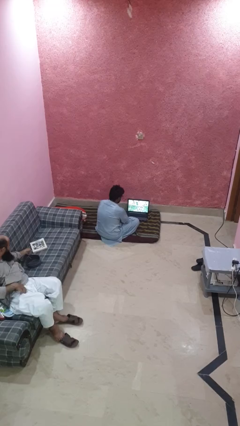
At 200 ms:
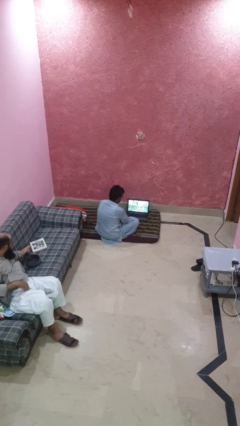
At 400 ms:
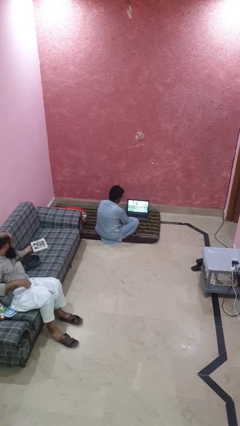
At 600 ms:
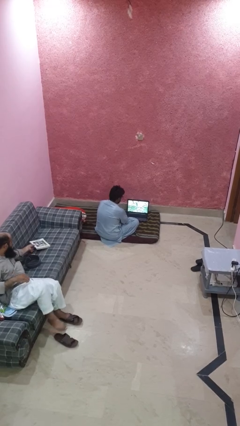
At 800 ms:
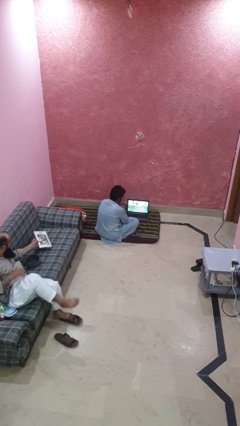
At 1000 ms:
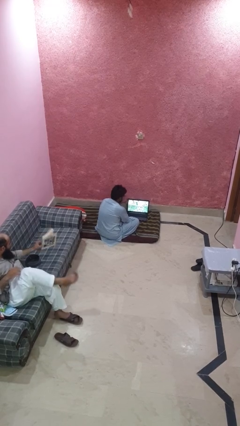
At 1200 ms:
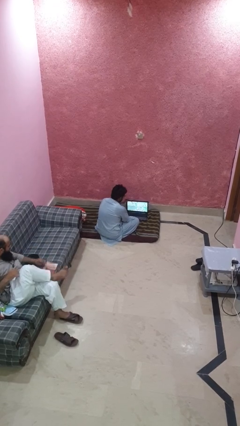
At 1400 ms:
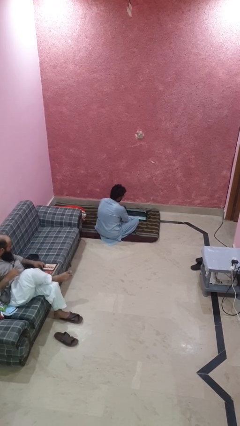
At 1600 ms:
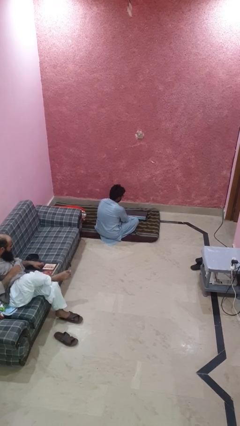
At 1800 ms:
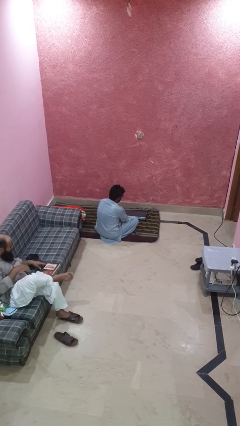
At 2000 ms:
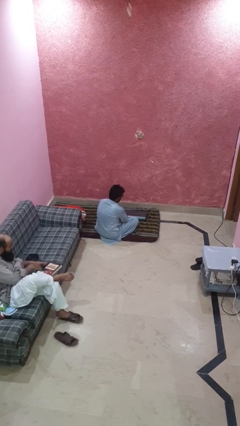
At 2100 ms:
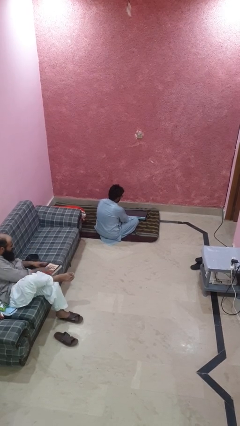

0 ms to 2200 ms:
person closes laptop

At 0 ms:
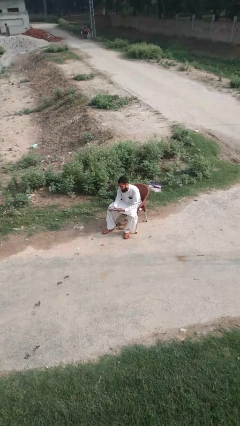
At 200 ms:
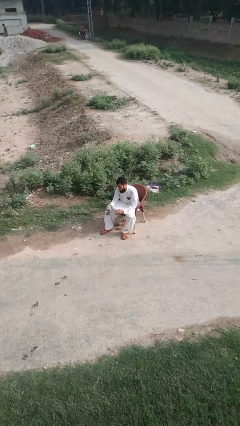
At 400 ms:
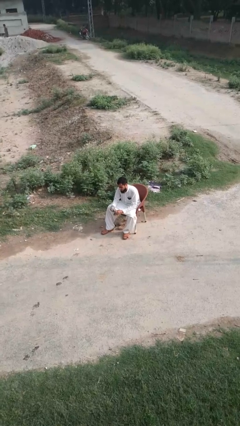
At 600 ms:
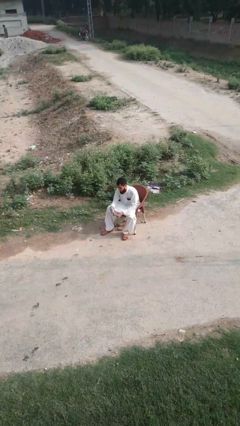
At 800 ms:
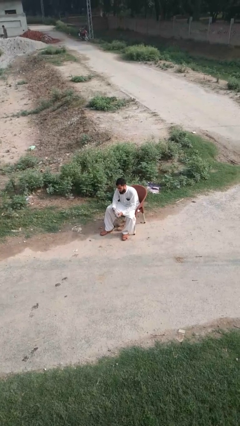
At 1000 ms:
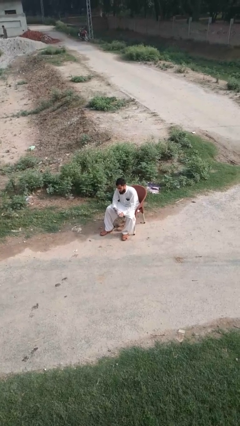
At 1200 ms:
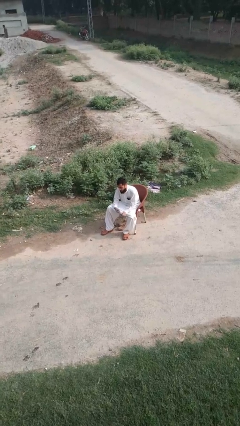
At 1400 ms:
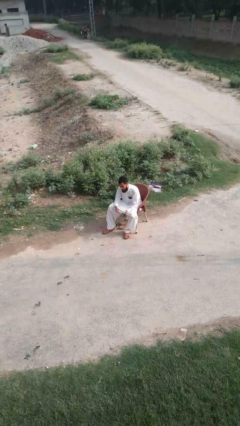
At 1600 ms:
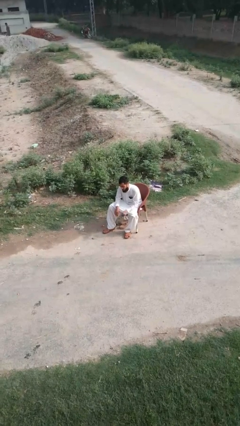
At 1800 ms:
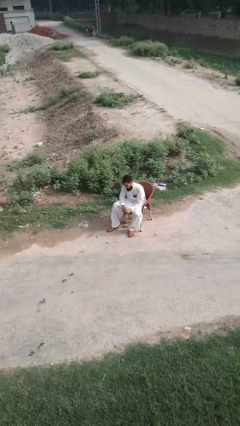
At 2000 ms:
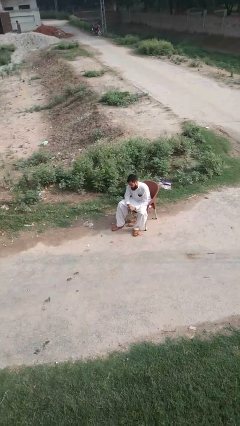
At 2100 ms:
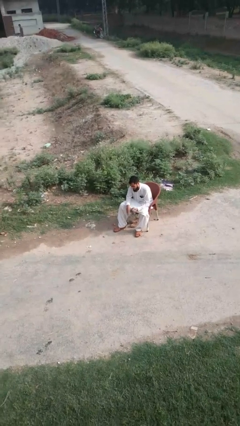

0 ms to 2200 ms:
person takes off gloves

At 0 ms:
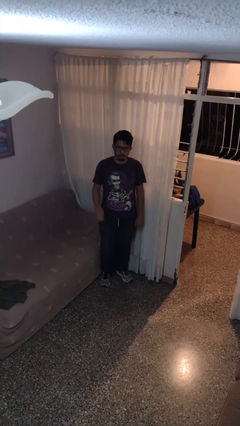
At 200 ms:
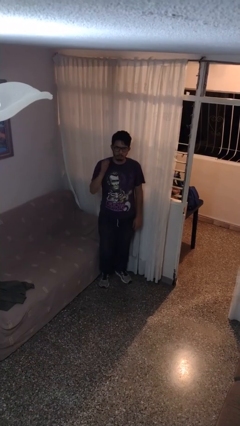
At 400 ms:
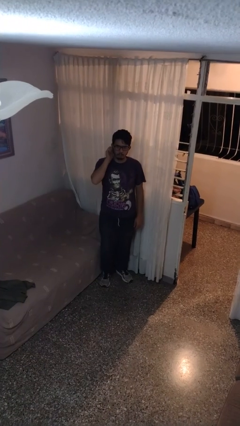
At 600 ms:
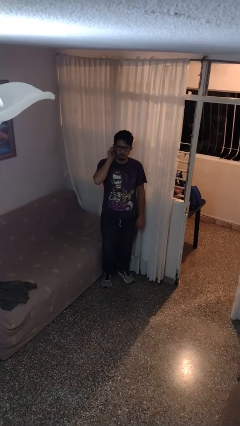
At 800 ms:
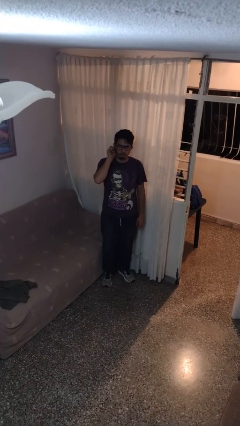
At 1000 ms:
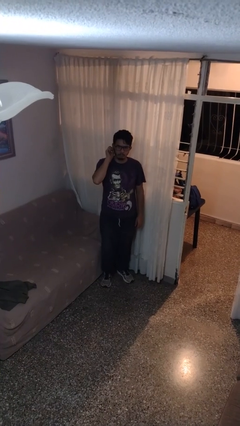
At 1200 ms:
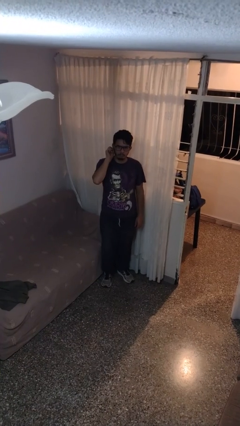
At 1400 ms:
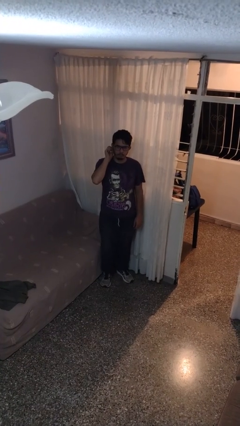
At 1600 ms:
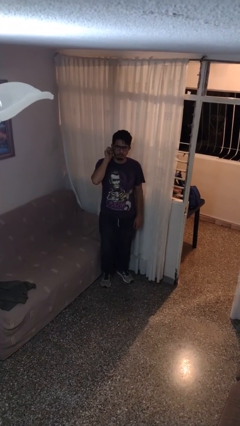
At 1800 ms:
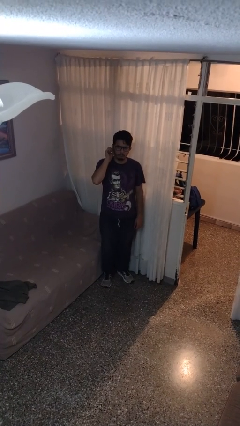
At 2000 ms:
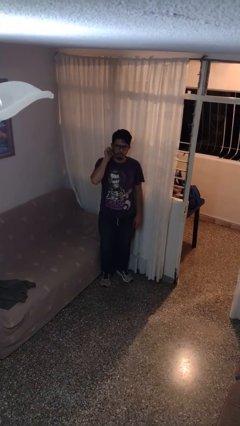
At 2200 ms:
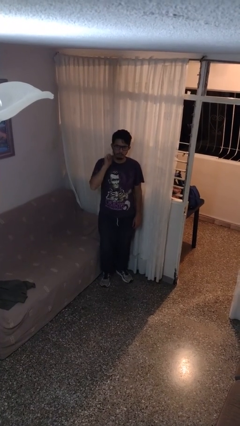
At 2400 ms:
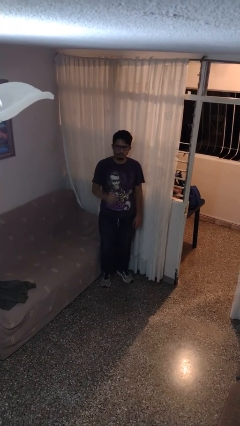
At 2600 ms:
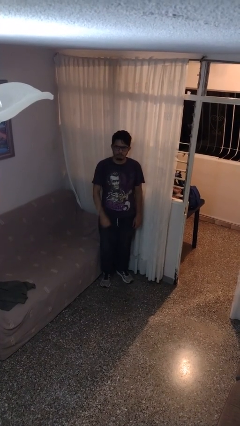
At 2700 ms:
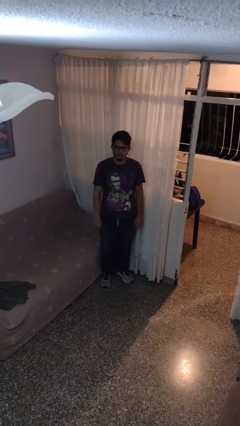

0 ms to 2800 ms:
person touches earlobe

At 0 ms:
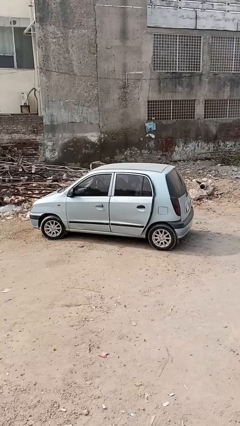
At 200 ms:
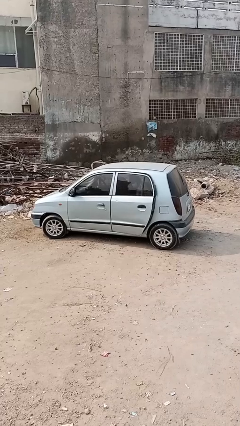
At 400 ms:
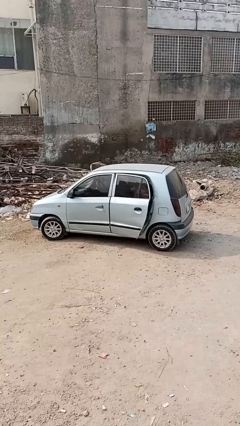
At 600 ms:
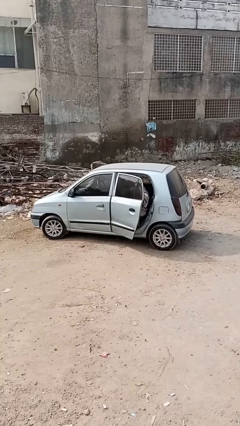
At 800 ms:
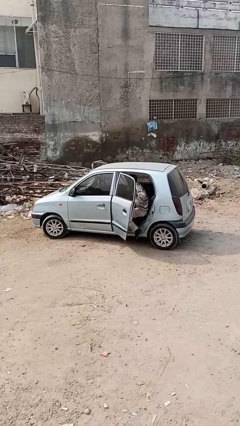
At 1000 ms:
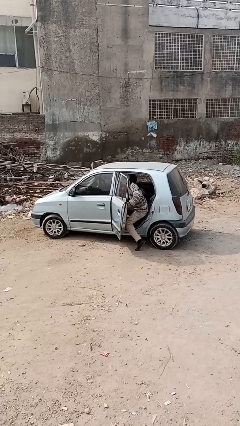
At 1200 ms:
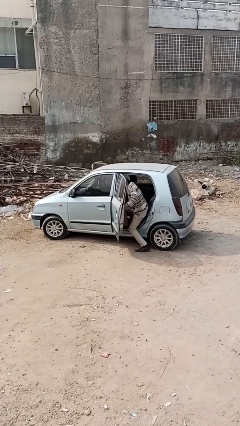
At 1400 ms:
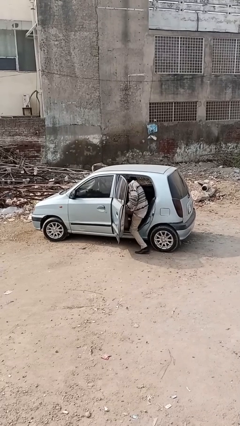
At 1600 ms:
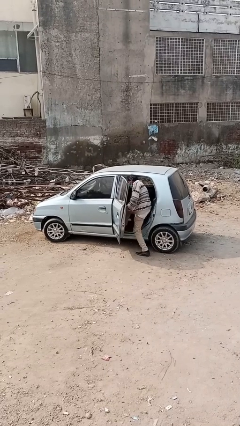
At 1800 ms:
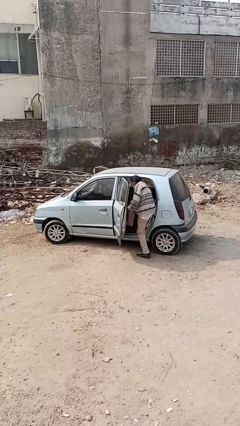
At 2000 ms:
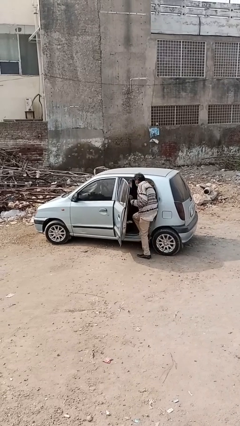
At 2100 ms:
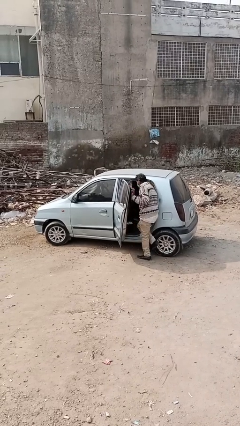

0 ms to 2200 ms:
car drops off person

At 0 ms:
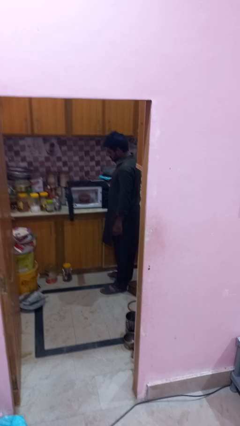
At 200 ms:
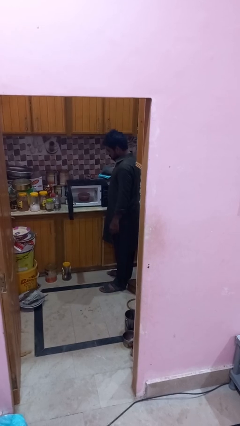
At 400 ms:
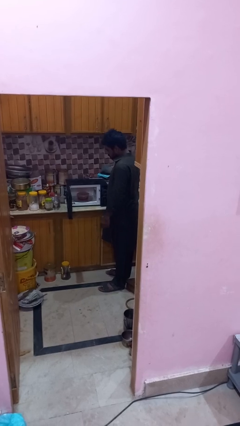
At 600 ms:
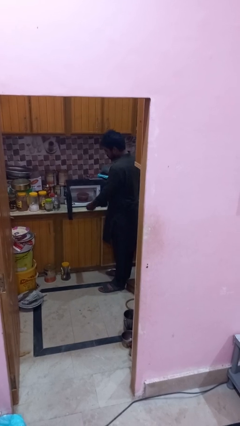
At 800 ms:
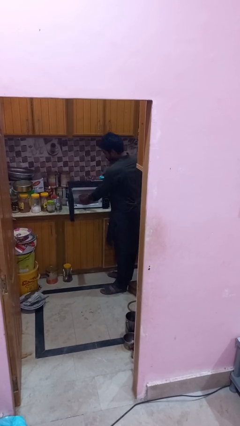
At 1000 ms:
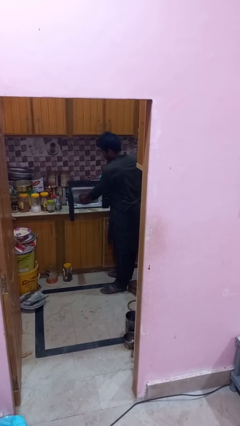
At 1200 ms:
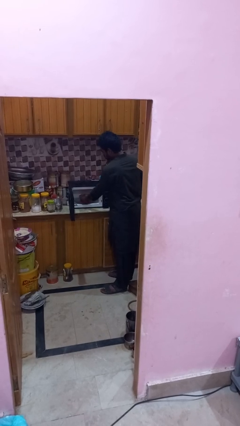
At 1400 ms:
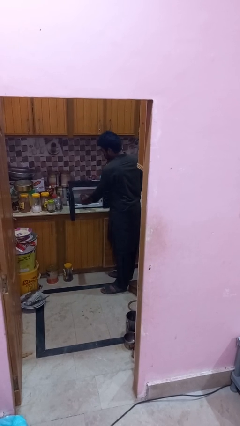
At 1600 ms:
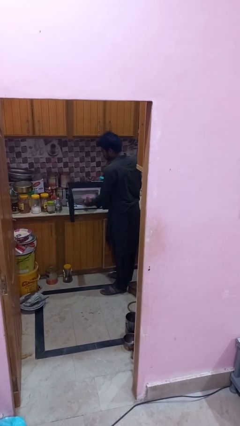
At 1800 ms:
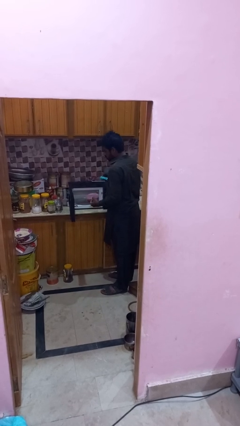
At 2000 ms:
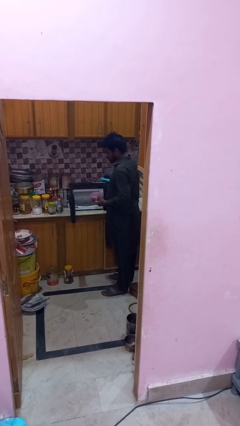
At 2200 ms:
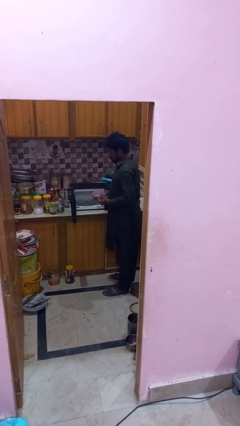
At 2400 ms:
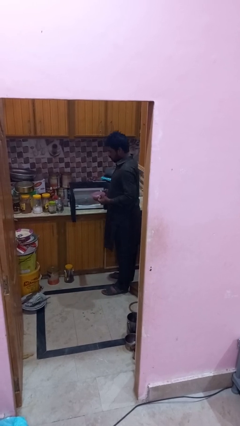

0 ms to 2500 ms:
person takes object from microwave

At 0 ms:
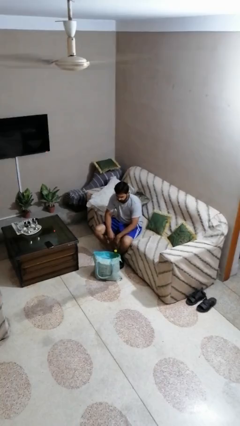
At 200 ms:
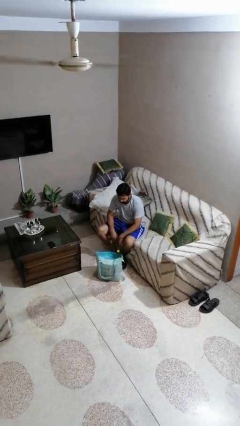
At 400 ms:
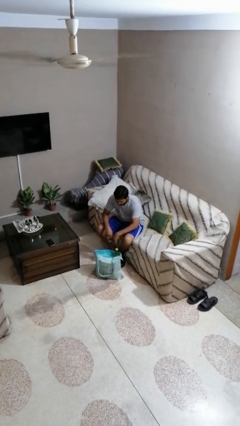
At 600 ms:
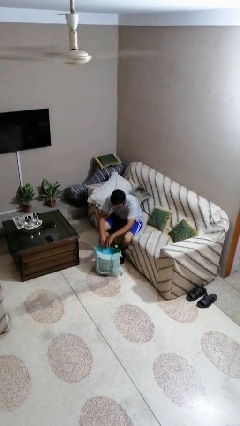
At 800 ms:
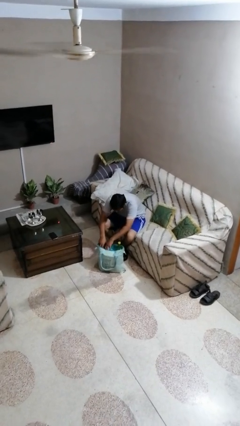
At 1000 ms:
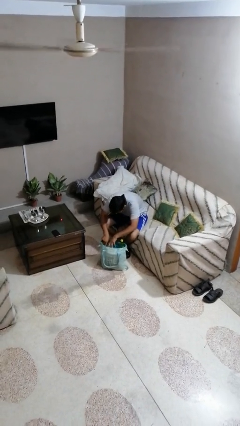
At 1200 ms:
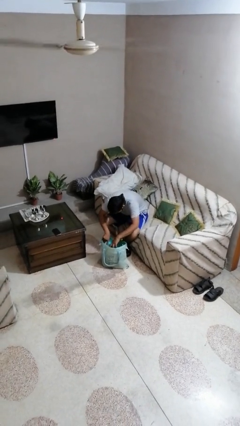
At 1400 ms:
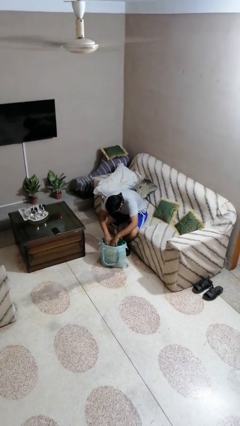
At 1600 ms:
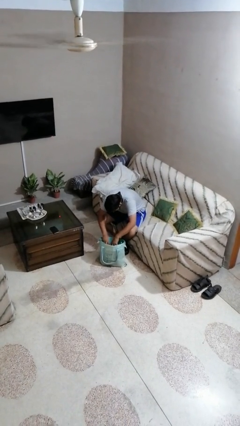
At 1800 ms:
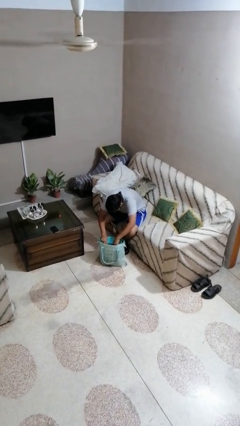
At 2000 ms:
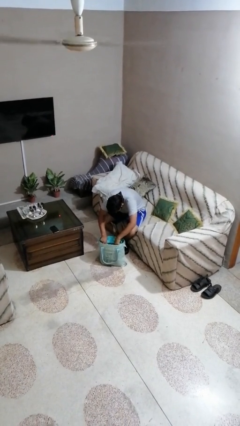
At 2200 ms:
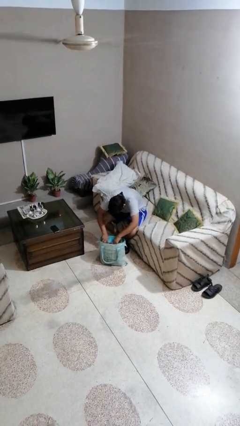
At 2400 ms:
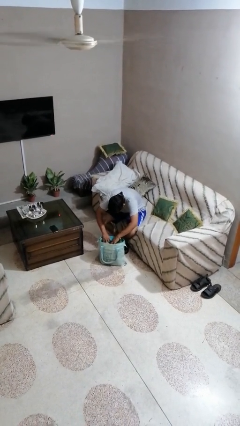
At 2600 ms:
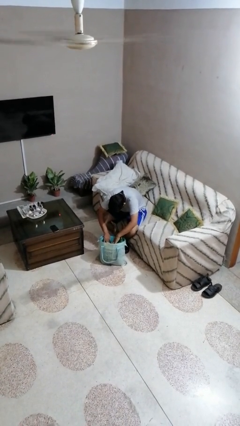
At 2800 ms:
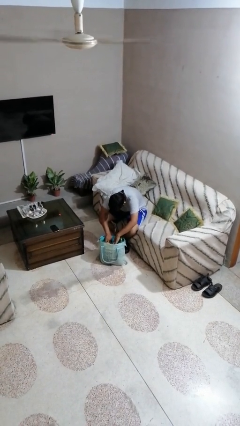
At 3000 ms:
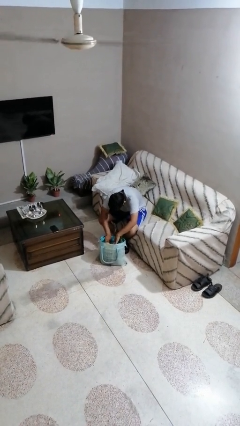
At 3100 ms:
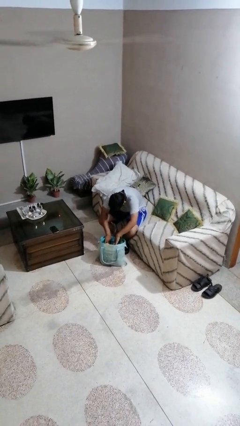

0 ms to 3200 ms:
person searches in bag

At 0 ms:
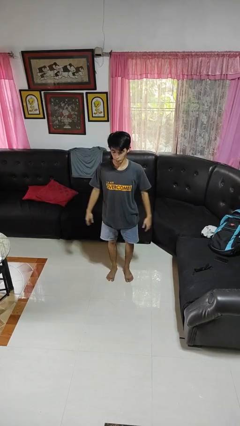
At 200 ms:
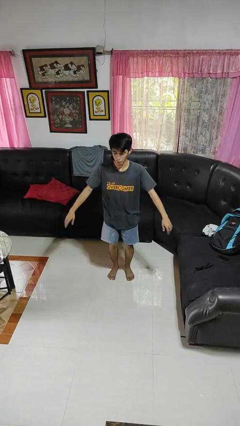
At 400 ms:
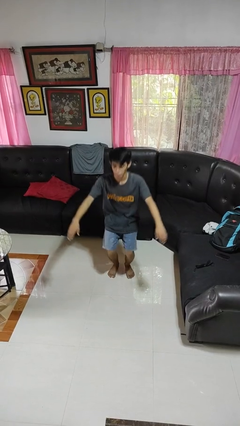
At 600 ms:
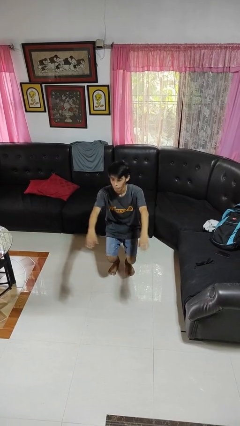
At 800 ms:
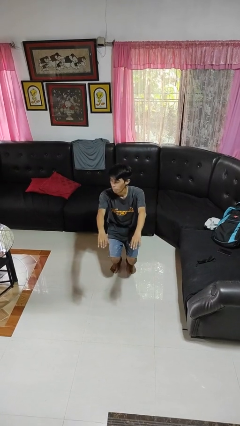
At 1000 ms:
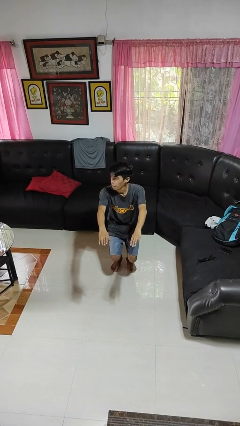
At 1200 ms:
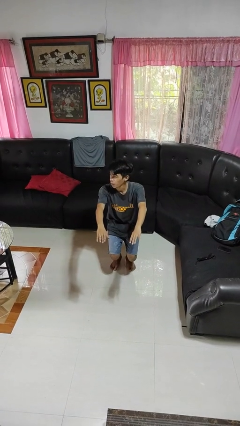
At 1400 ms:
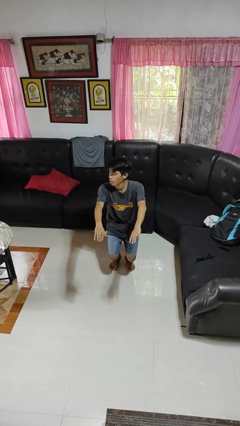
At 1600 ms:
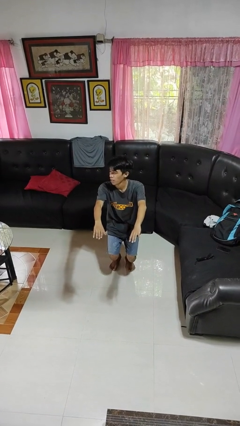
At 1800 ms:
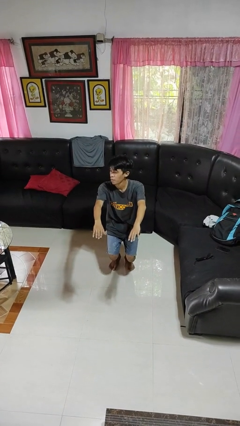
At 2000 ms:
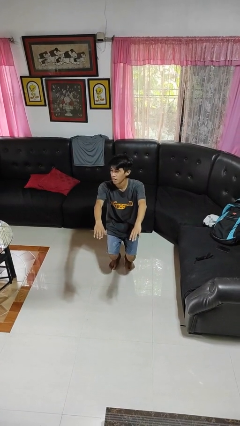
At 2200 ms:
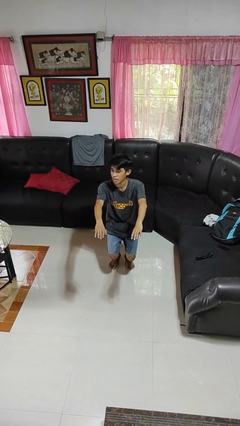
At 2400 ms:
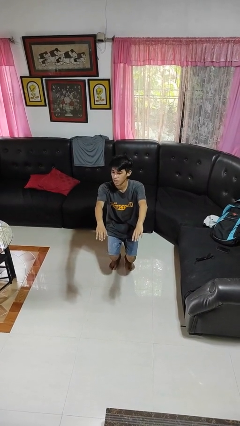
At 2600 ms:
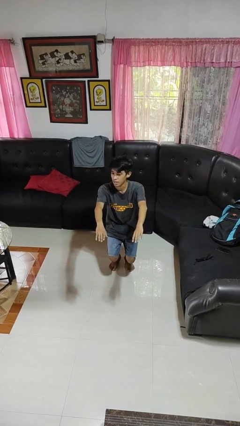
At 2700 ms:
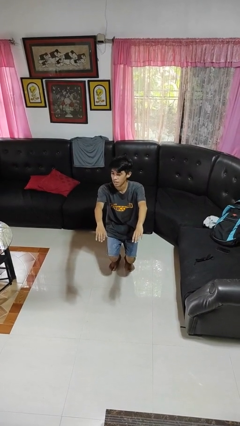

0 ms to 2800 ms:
person squats
